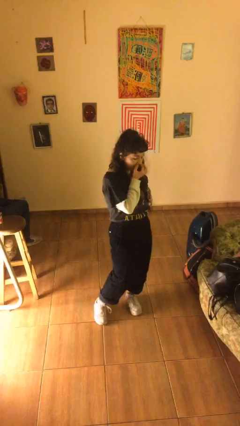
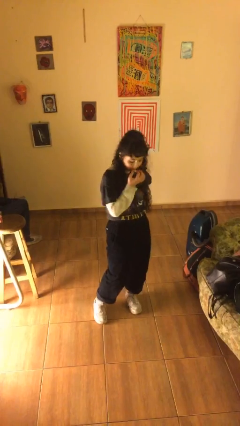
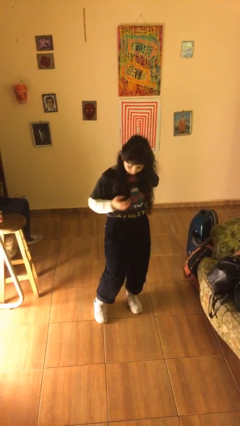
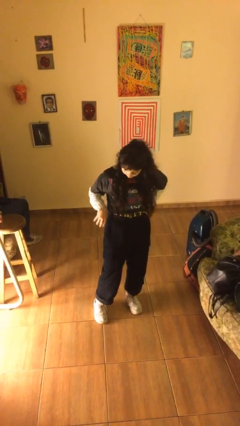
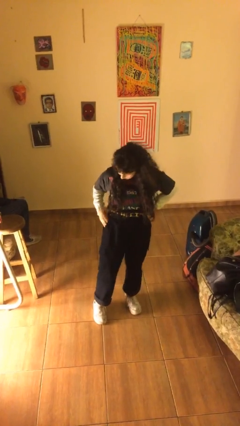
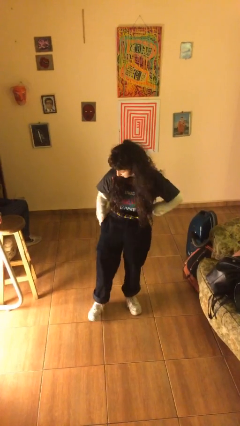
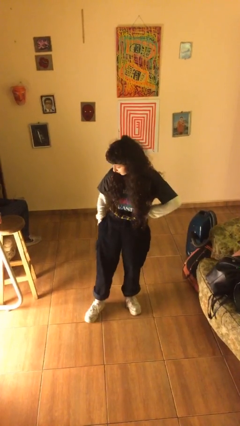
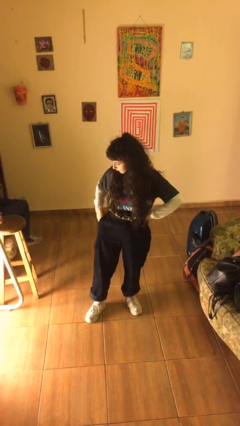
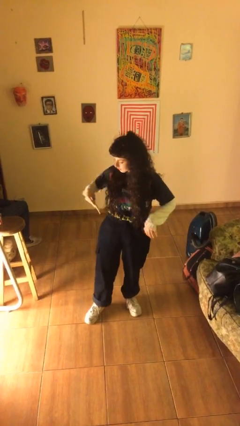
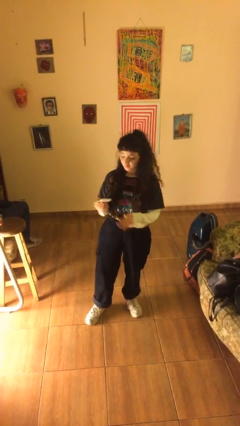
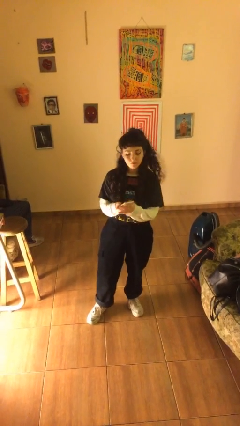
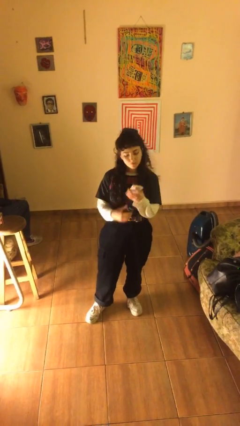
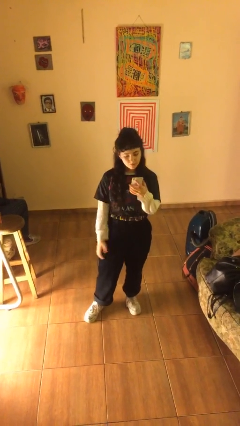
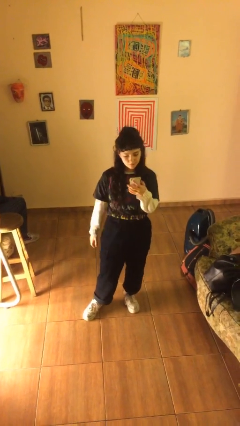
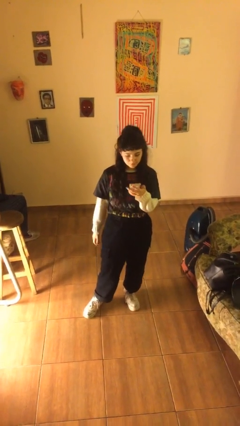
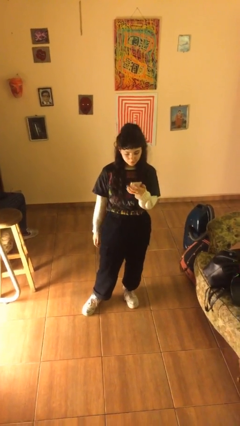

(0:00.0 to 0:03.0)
person takes phone from pocket

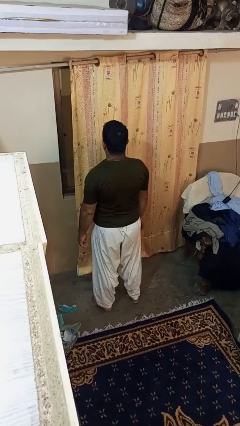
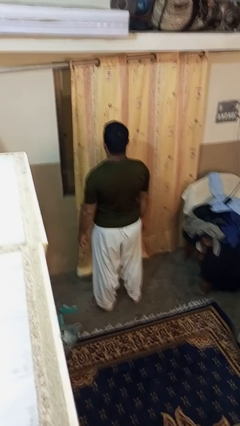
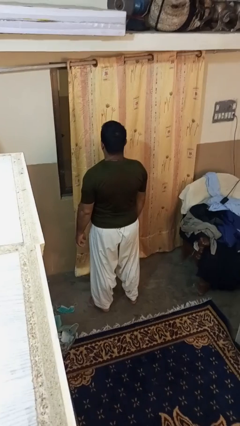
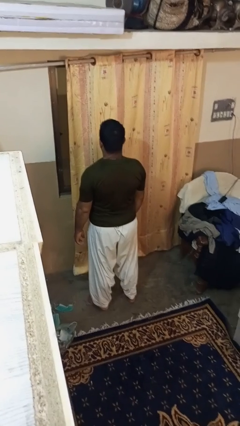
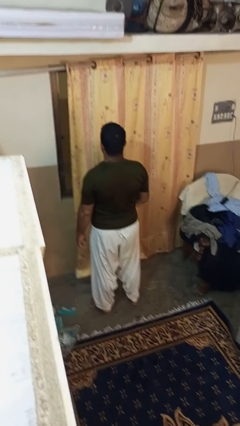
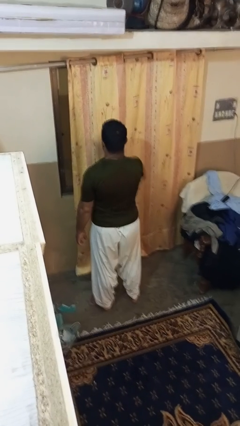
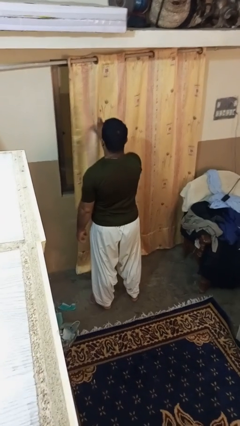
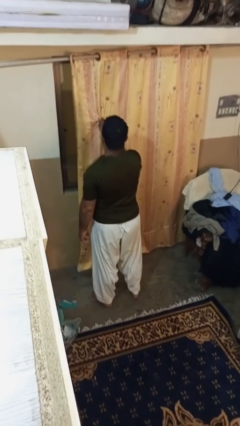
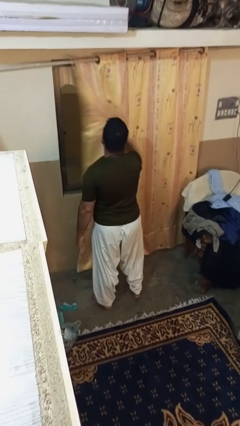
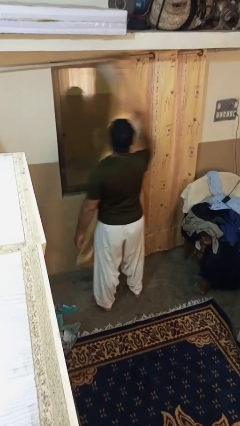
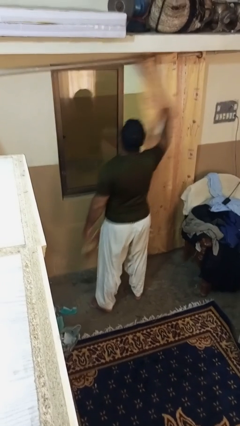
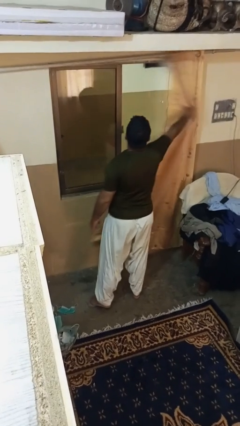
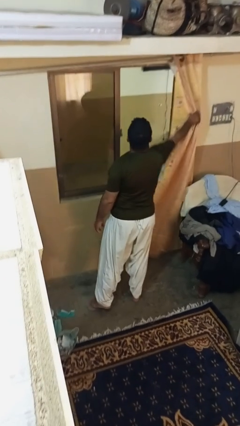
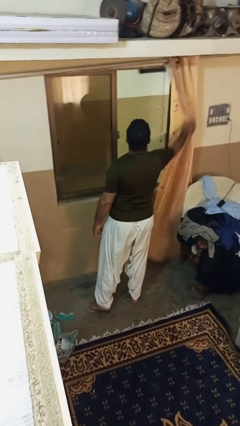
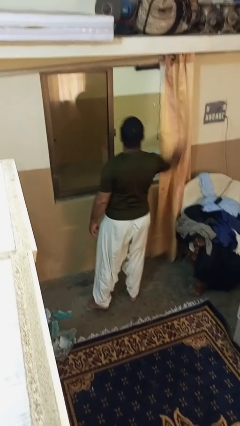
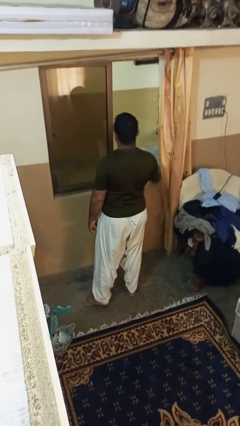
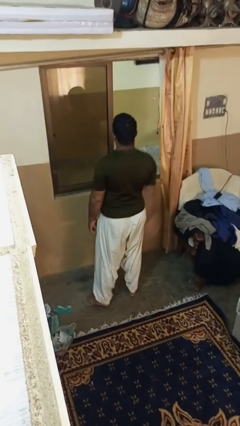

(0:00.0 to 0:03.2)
person opens curtains

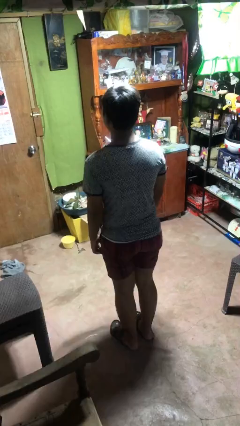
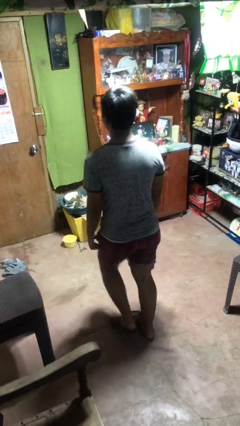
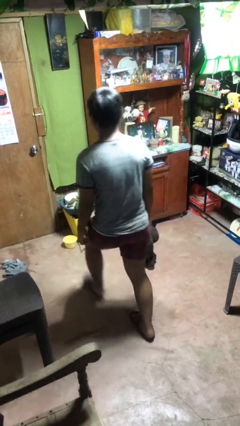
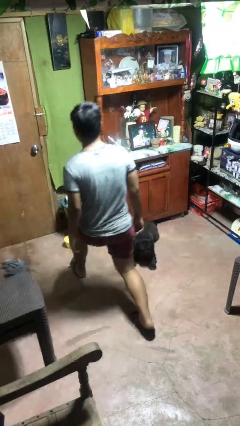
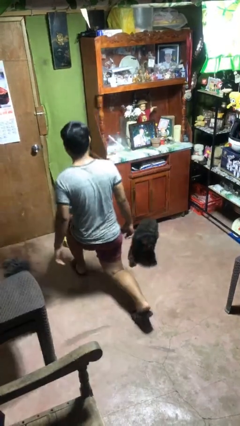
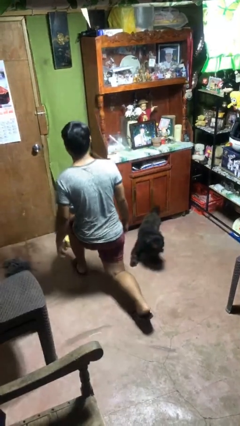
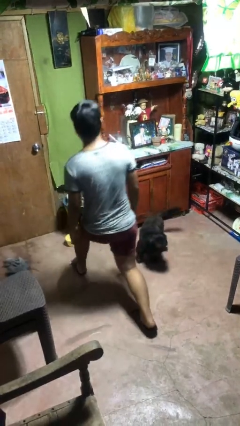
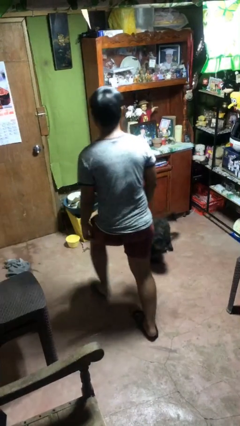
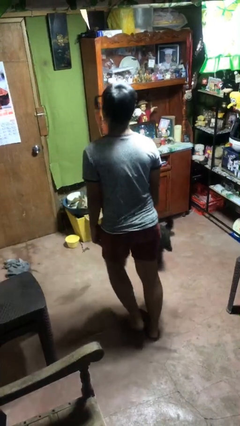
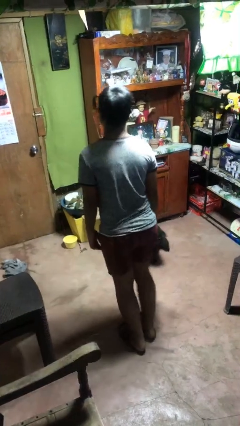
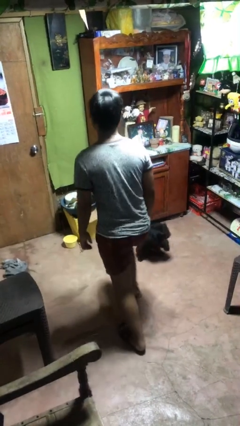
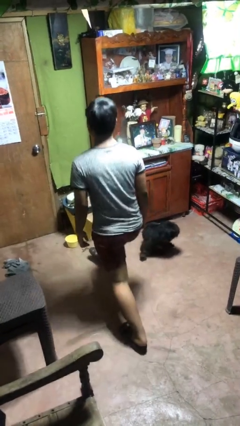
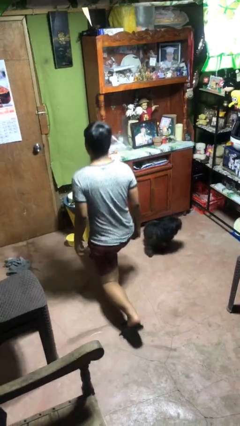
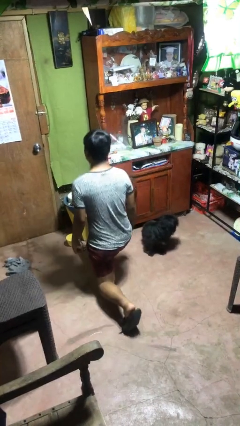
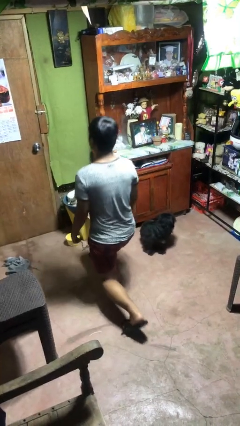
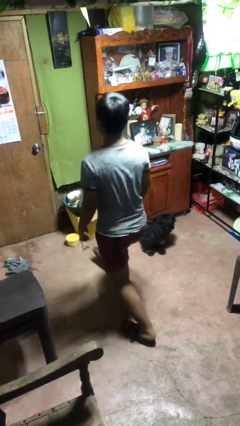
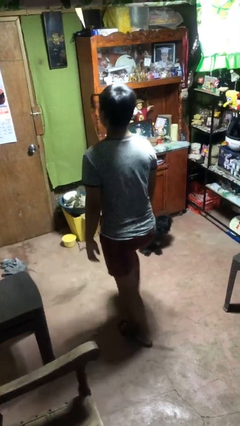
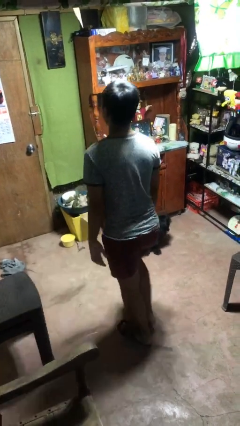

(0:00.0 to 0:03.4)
person exercises with lunges

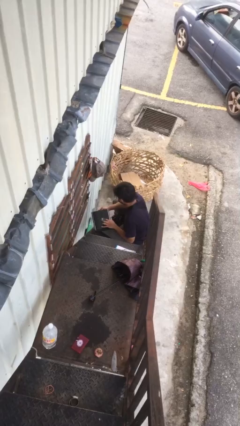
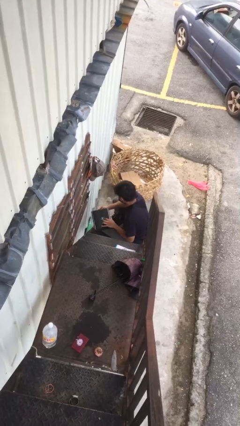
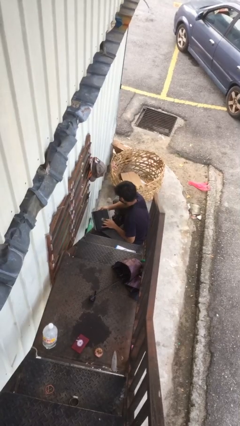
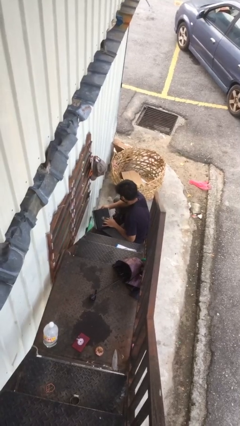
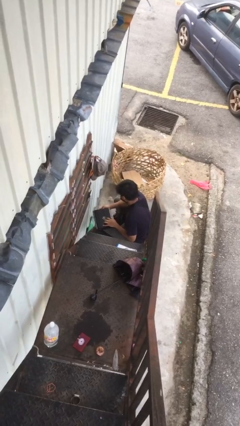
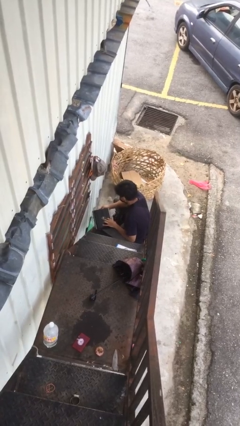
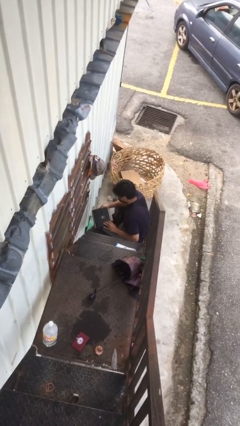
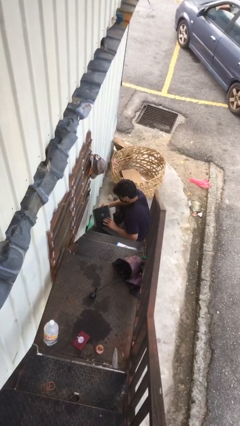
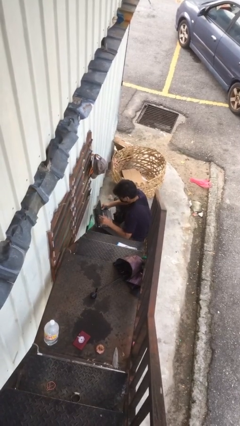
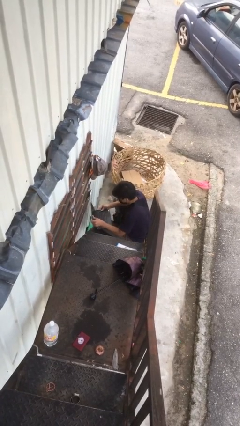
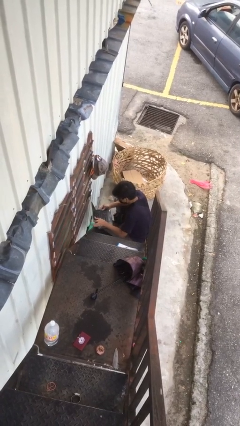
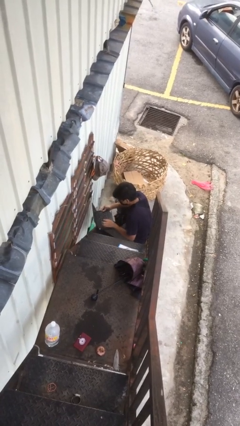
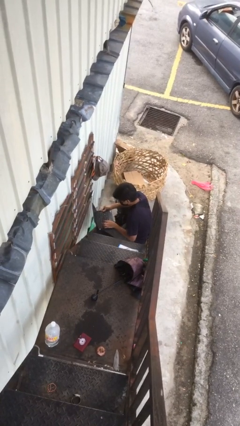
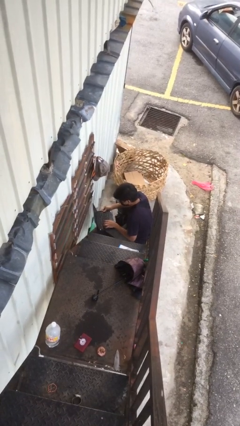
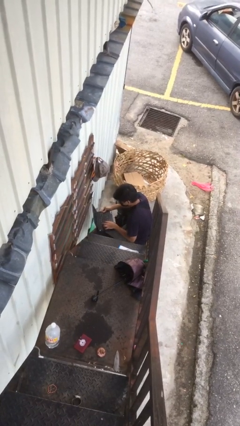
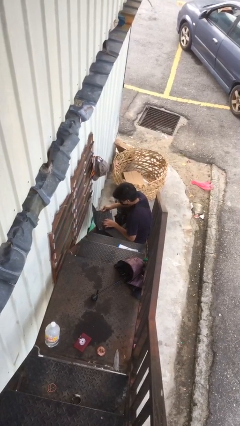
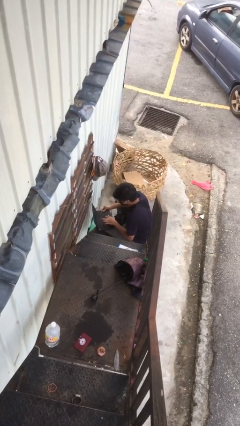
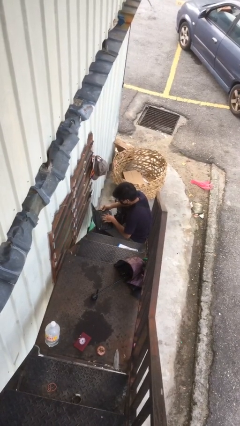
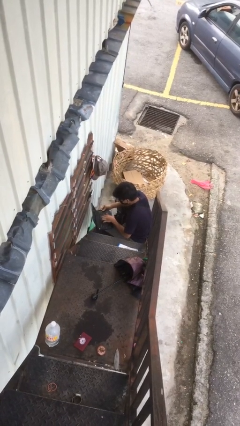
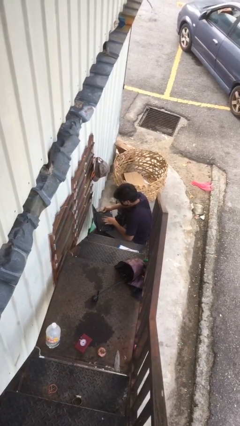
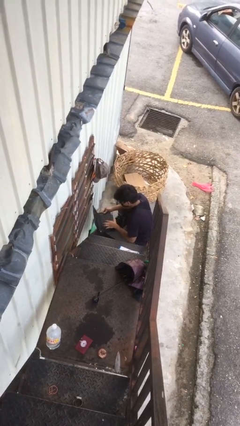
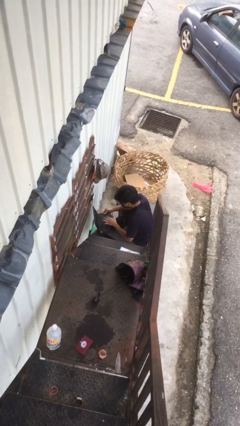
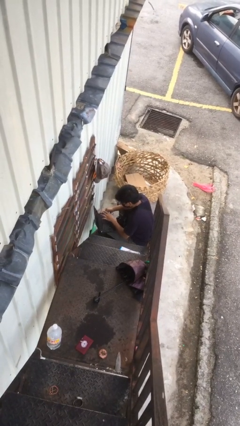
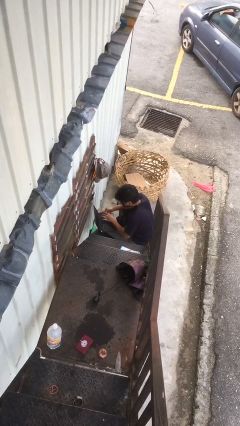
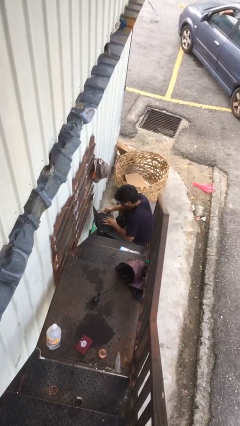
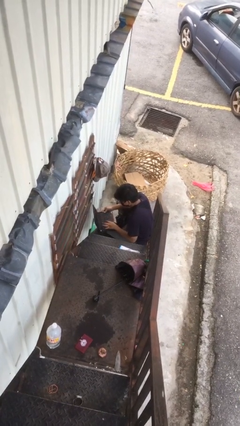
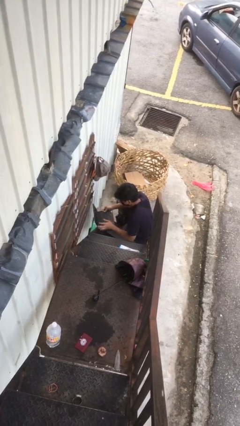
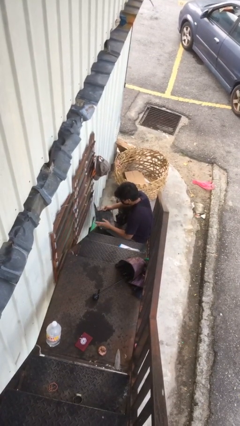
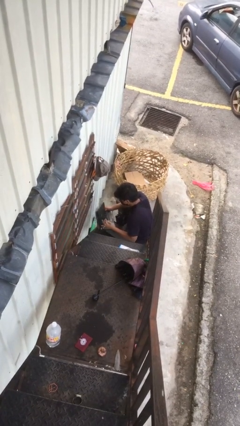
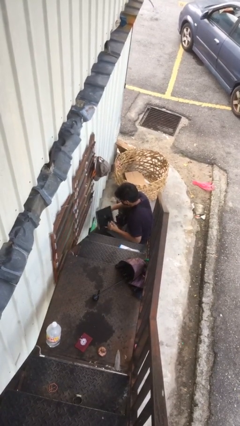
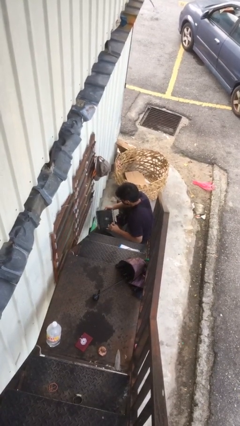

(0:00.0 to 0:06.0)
person interacts with laptop

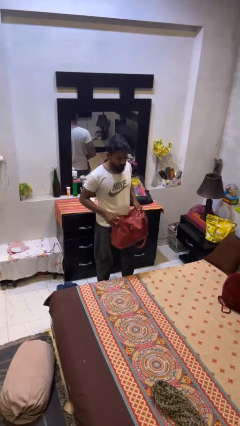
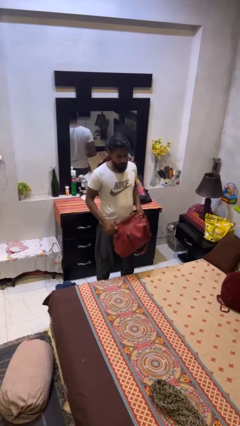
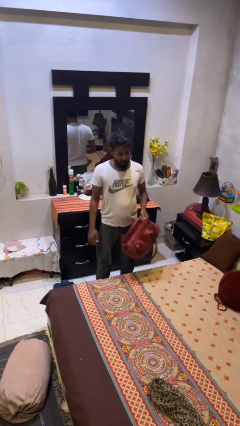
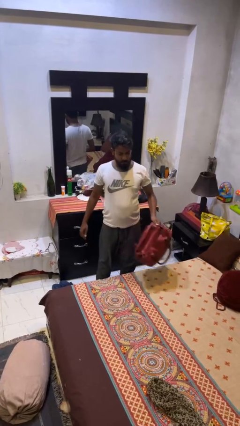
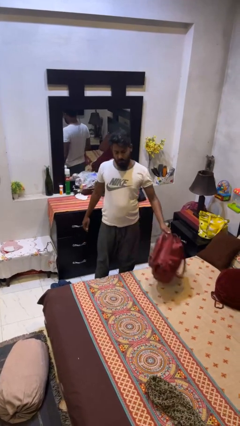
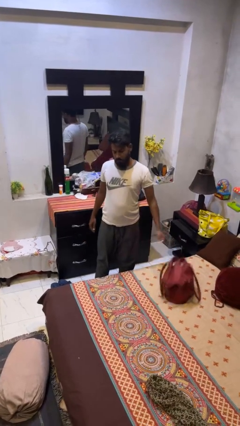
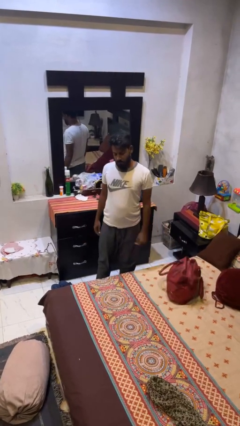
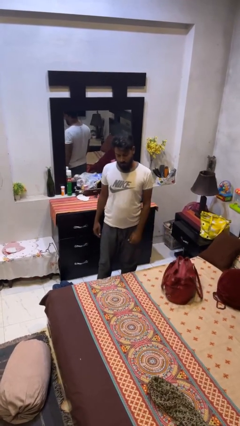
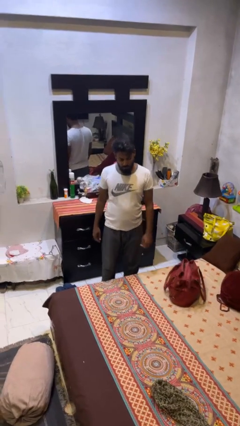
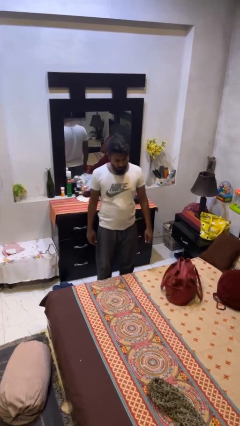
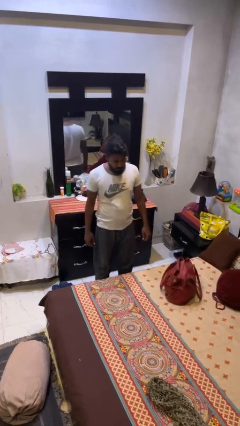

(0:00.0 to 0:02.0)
person puts down object on bed
